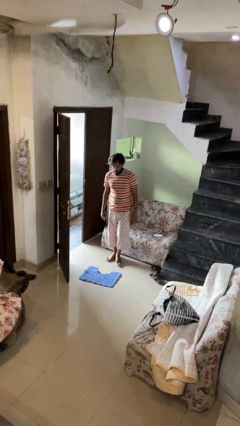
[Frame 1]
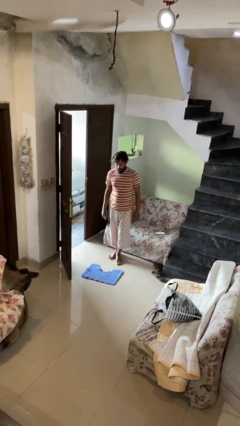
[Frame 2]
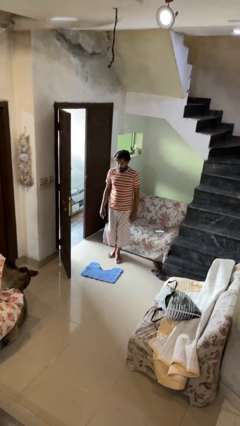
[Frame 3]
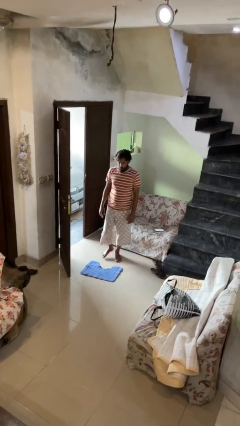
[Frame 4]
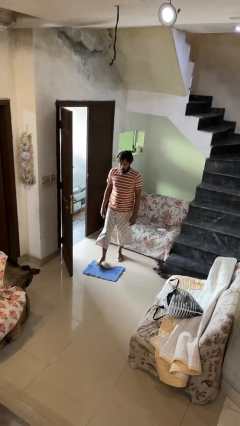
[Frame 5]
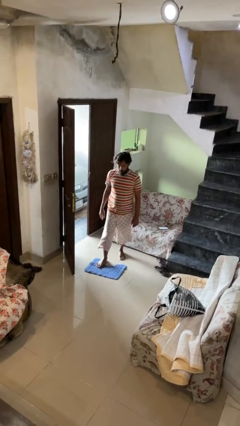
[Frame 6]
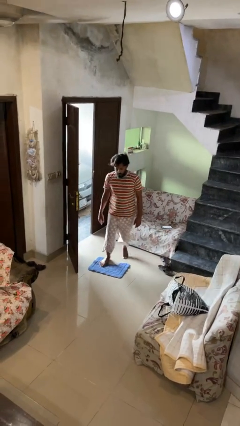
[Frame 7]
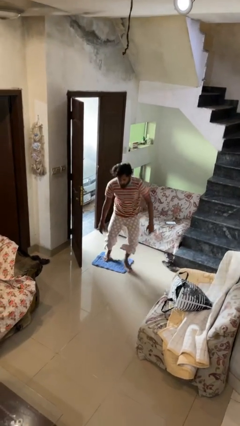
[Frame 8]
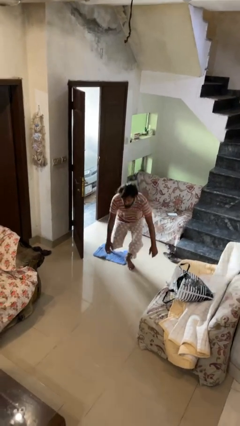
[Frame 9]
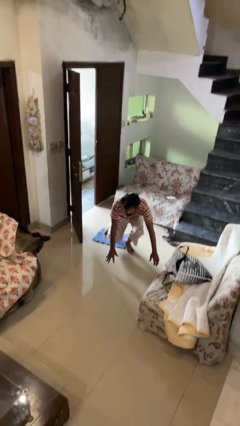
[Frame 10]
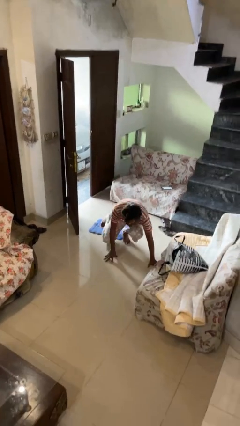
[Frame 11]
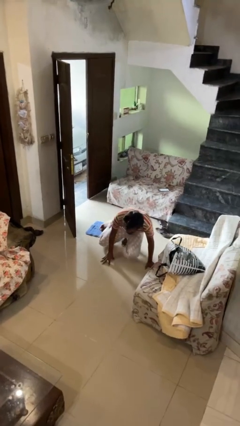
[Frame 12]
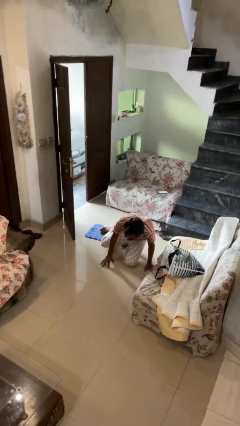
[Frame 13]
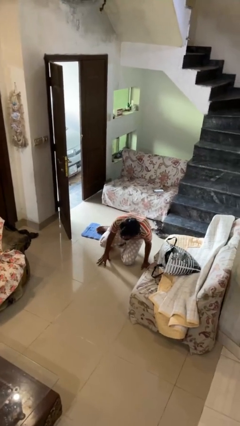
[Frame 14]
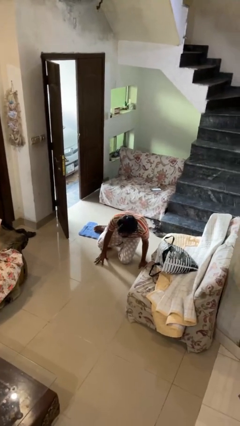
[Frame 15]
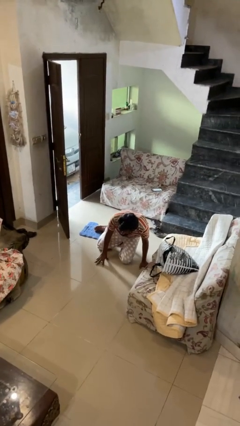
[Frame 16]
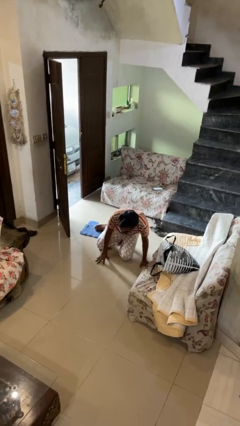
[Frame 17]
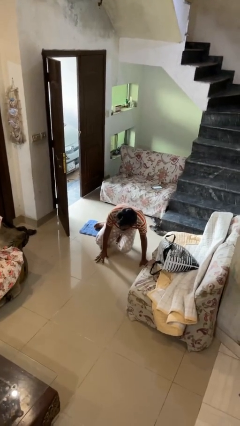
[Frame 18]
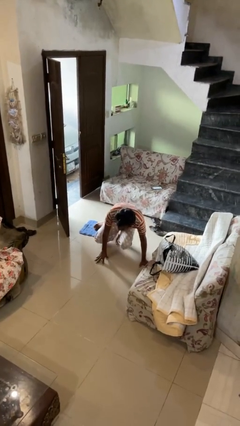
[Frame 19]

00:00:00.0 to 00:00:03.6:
person trips on object on floor

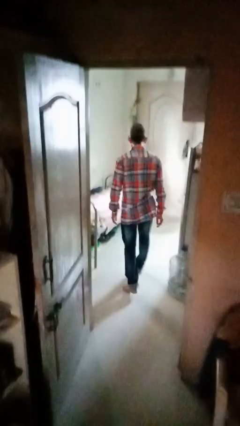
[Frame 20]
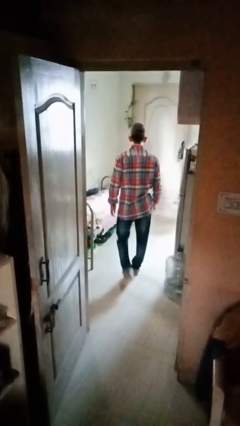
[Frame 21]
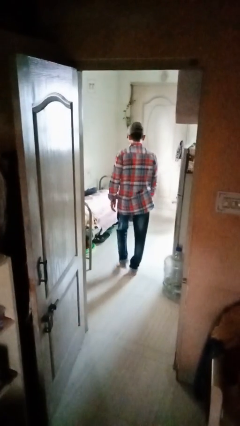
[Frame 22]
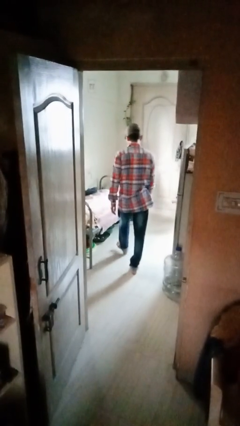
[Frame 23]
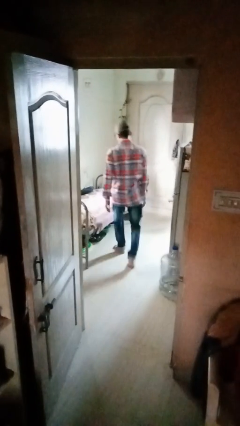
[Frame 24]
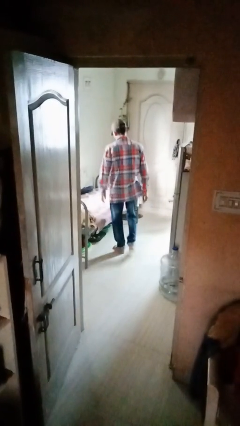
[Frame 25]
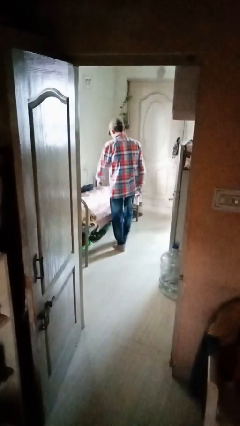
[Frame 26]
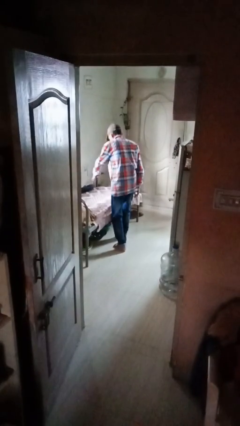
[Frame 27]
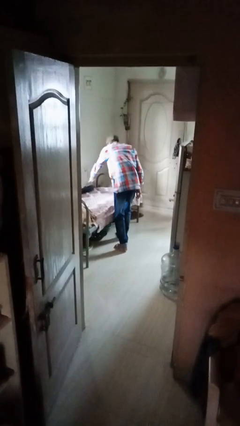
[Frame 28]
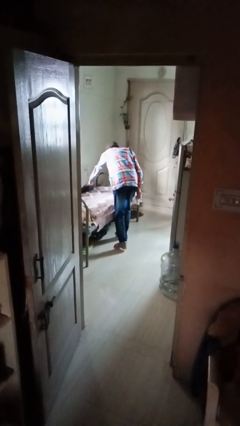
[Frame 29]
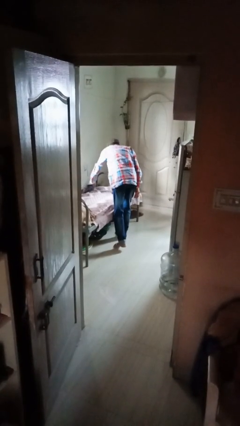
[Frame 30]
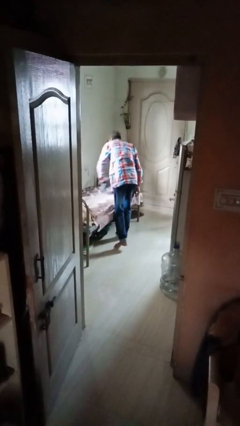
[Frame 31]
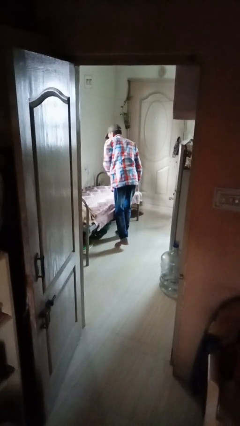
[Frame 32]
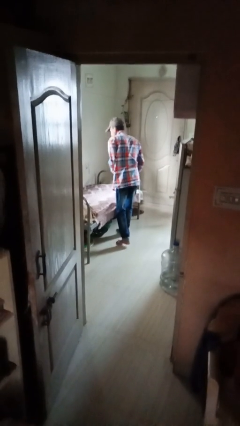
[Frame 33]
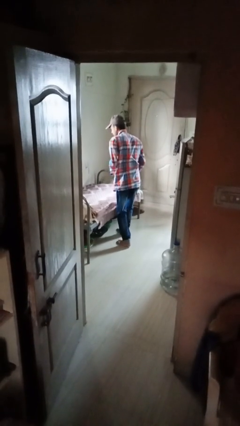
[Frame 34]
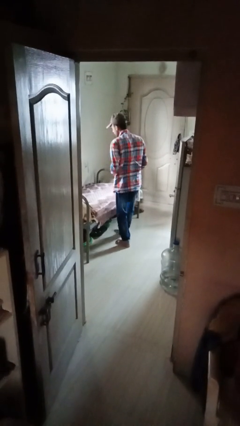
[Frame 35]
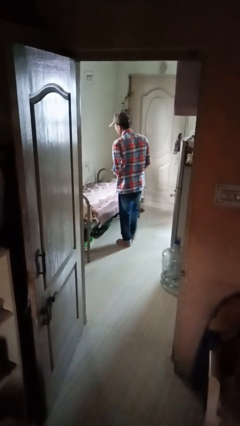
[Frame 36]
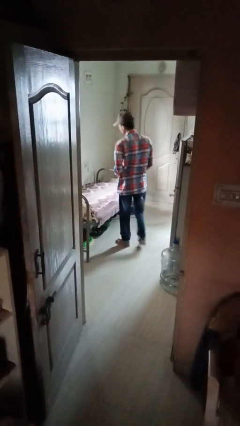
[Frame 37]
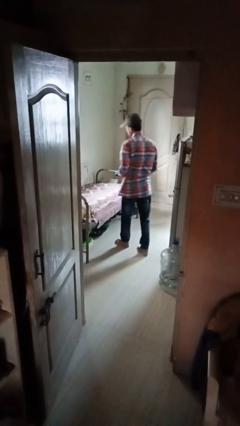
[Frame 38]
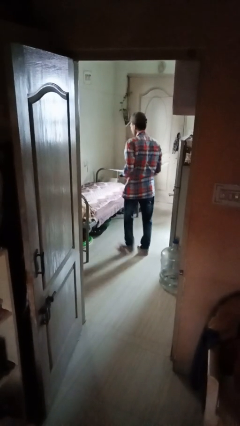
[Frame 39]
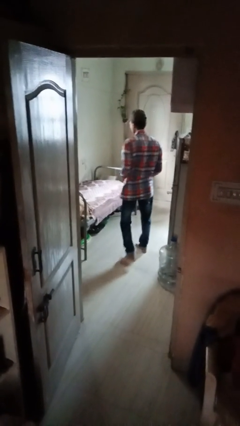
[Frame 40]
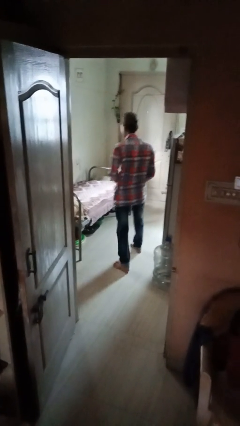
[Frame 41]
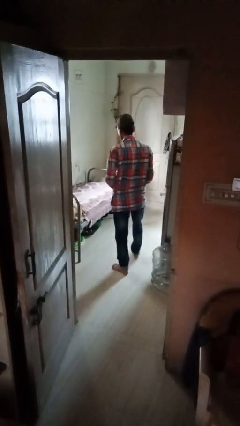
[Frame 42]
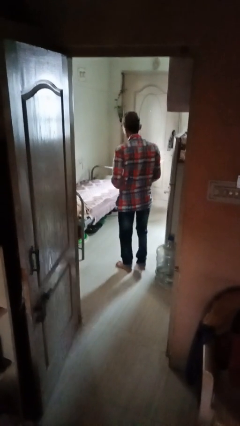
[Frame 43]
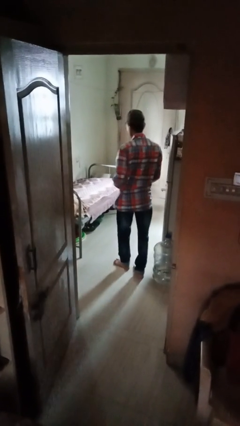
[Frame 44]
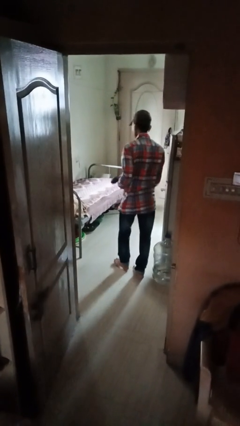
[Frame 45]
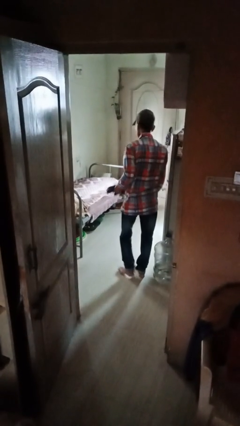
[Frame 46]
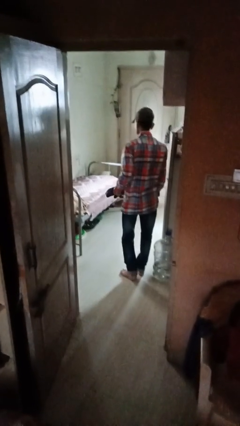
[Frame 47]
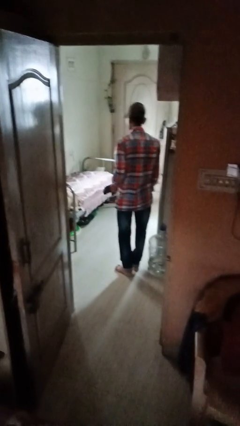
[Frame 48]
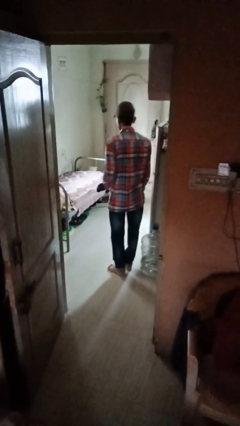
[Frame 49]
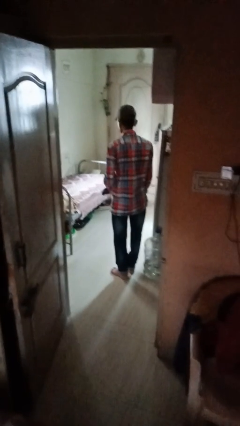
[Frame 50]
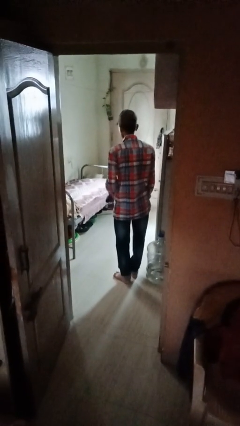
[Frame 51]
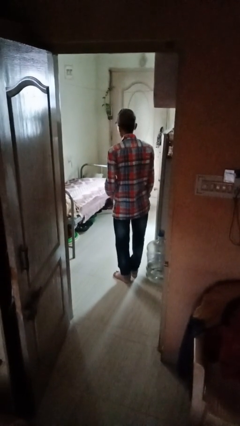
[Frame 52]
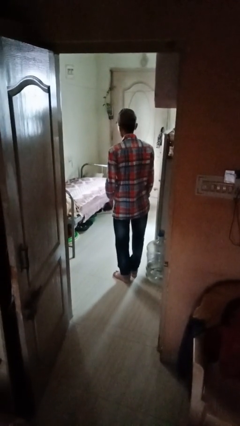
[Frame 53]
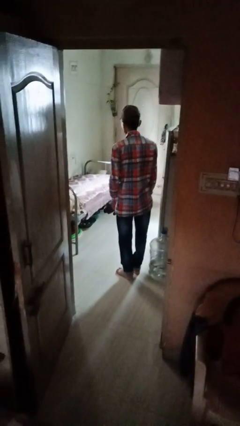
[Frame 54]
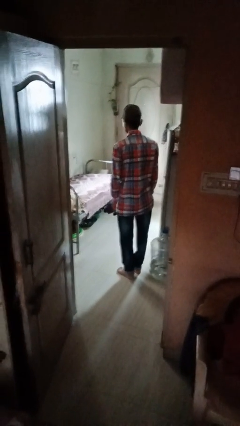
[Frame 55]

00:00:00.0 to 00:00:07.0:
person picks up object from bed

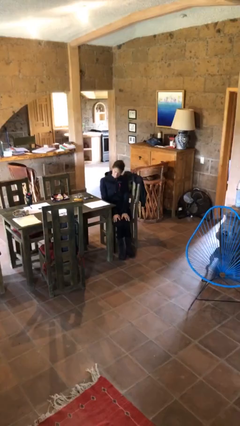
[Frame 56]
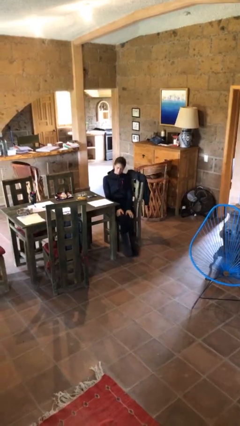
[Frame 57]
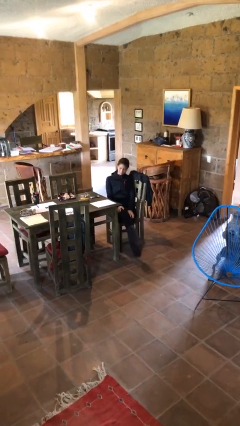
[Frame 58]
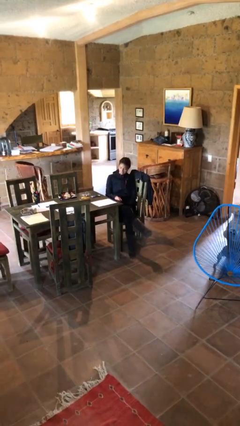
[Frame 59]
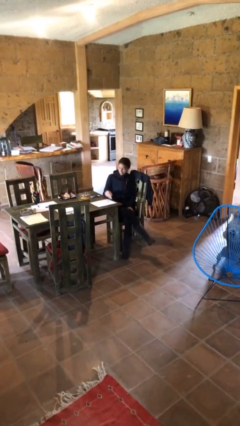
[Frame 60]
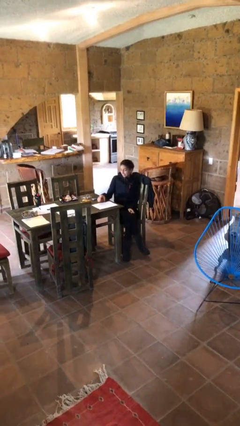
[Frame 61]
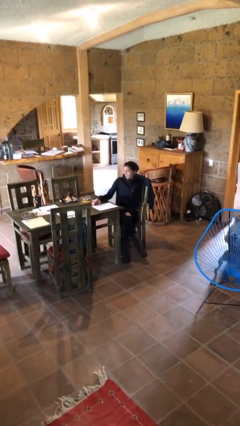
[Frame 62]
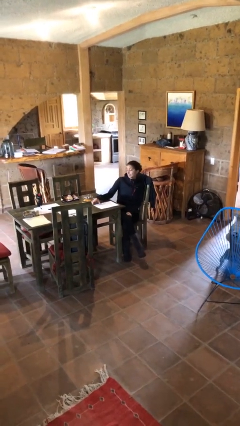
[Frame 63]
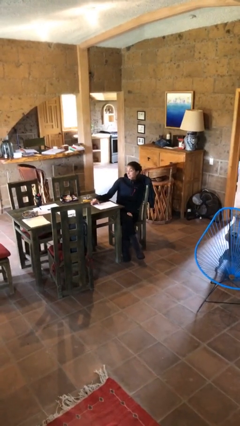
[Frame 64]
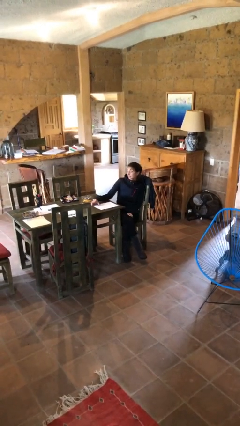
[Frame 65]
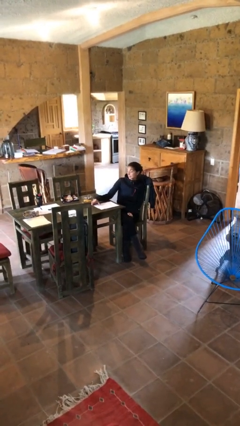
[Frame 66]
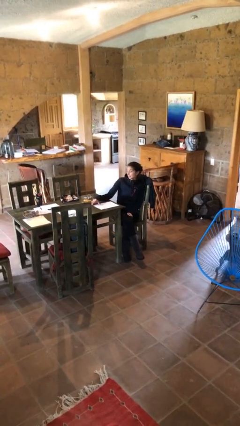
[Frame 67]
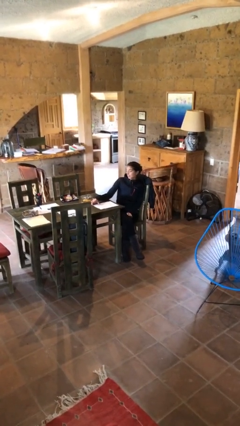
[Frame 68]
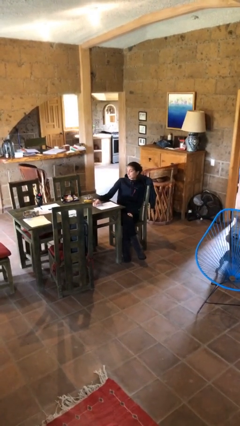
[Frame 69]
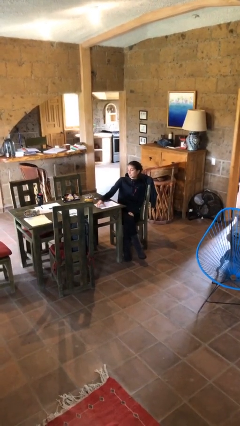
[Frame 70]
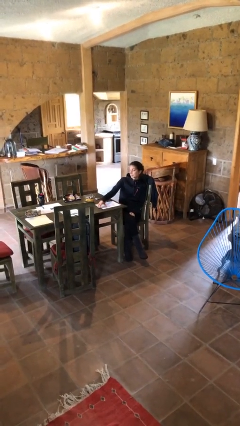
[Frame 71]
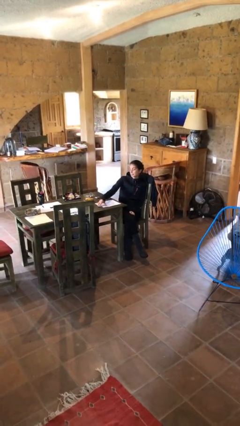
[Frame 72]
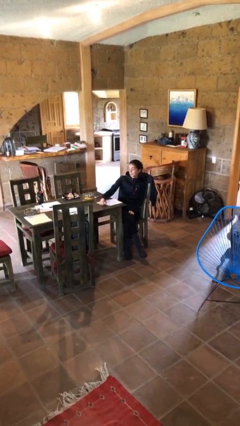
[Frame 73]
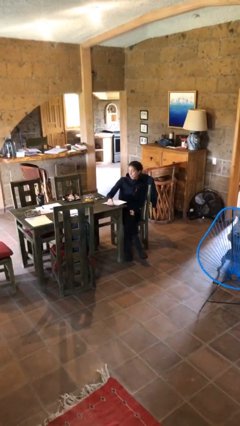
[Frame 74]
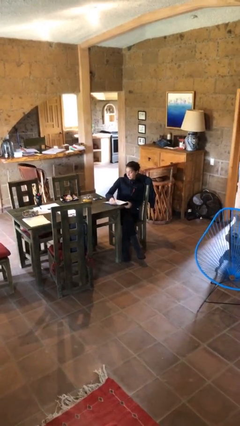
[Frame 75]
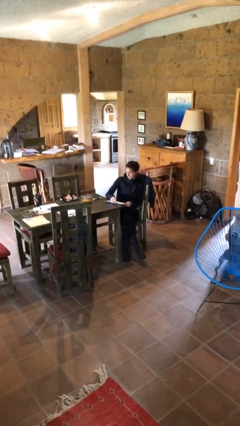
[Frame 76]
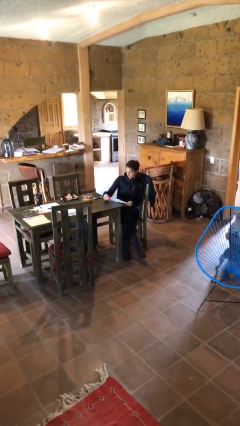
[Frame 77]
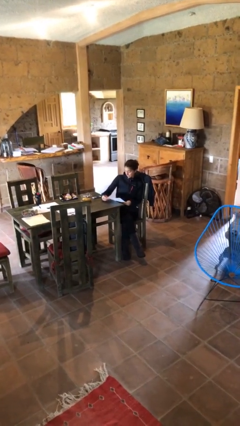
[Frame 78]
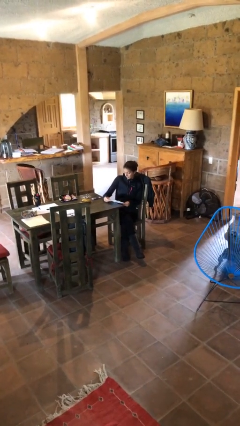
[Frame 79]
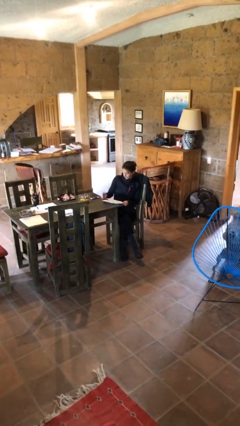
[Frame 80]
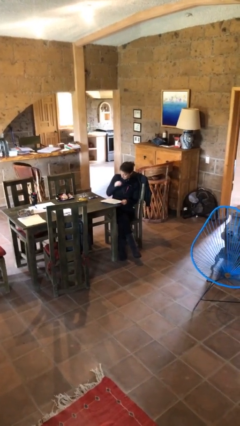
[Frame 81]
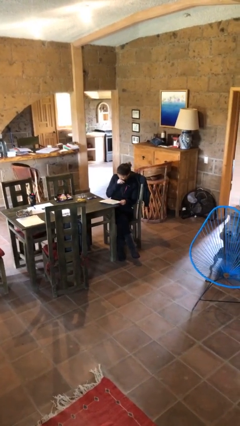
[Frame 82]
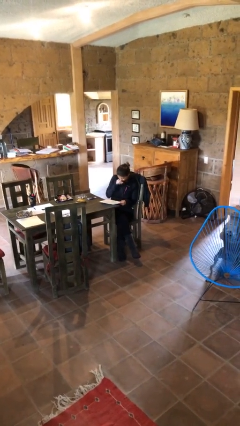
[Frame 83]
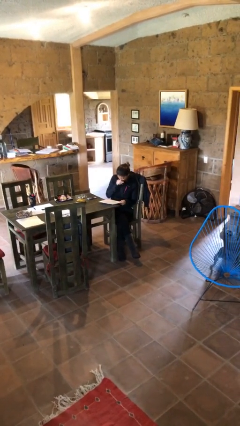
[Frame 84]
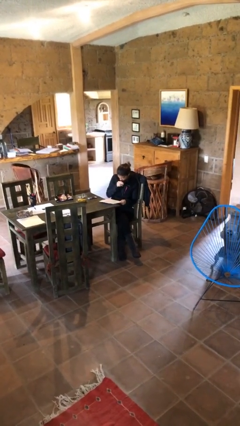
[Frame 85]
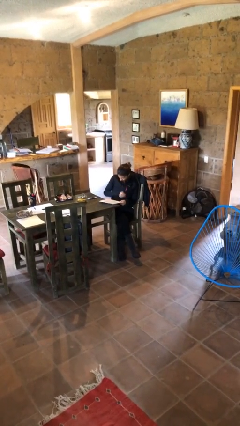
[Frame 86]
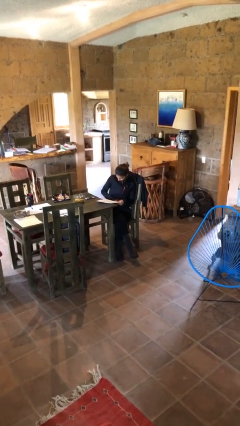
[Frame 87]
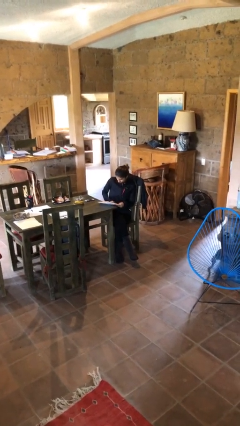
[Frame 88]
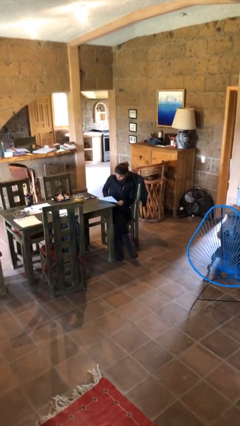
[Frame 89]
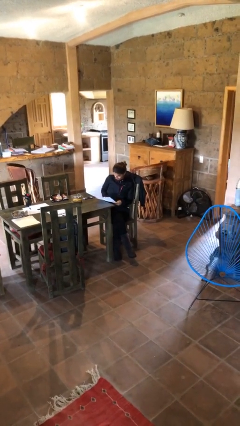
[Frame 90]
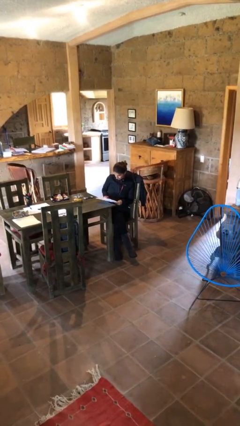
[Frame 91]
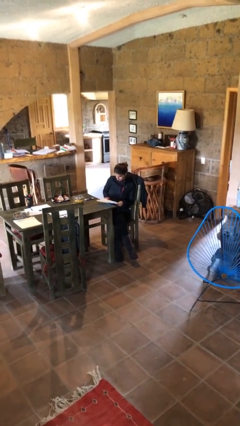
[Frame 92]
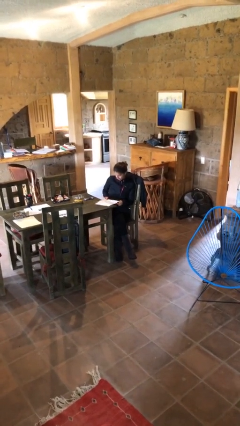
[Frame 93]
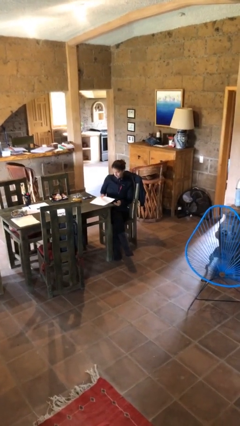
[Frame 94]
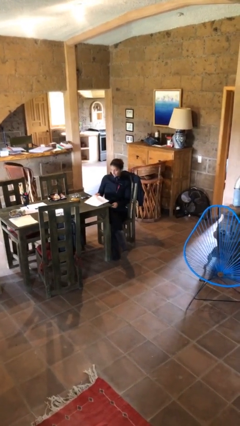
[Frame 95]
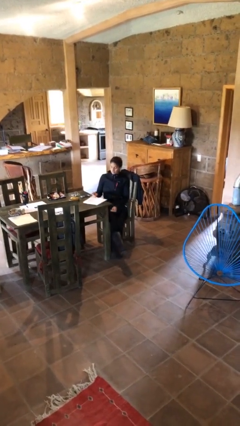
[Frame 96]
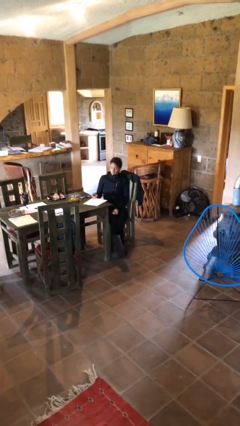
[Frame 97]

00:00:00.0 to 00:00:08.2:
person reads document
